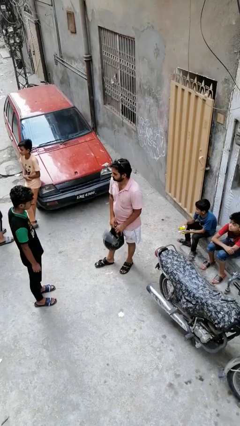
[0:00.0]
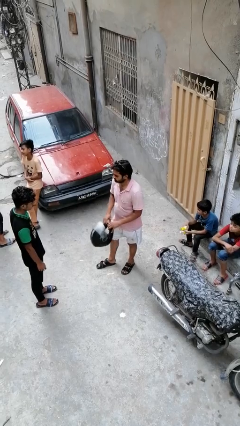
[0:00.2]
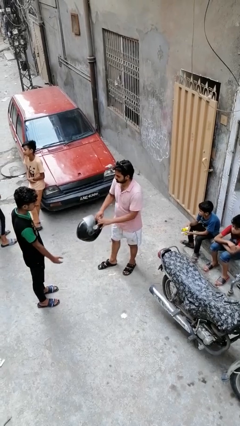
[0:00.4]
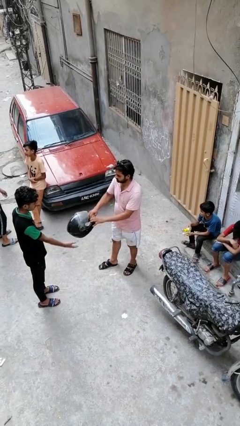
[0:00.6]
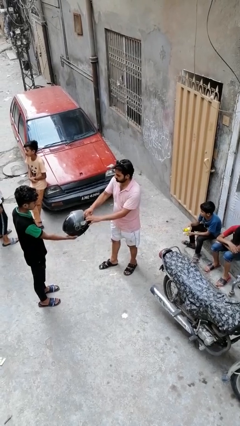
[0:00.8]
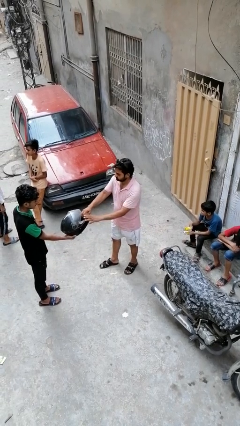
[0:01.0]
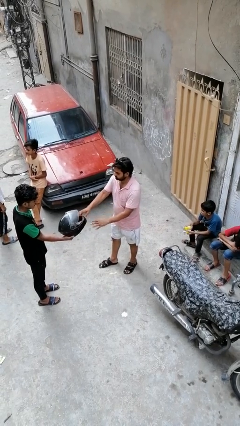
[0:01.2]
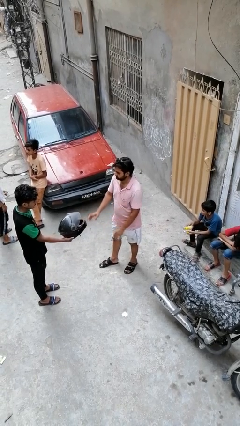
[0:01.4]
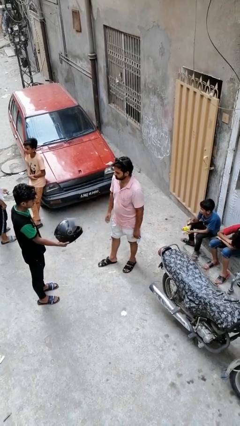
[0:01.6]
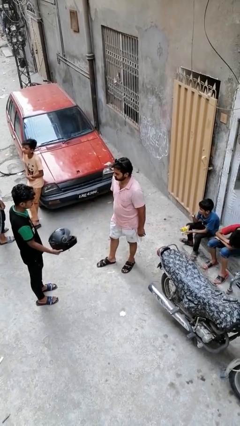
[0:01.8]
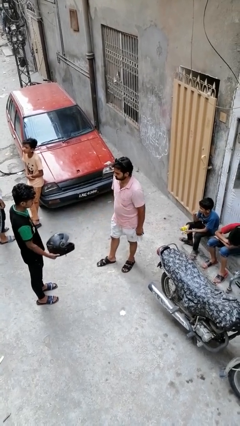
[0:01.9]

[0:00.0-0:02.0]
person transfers object to person

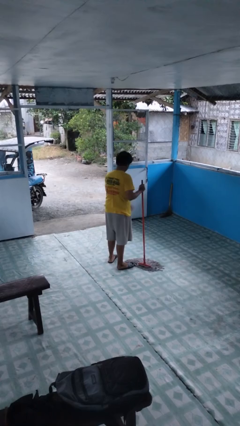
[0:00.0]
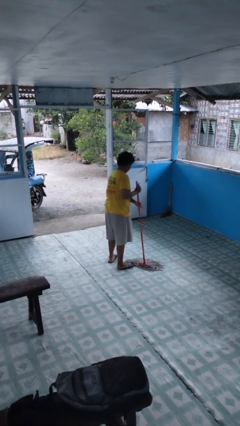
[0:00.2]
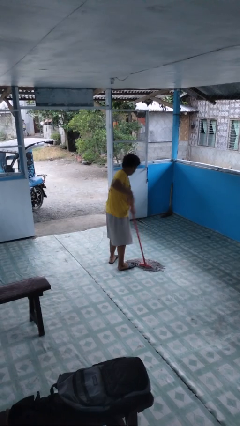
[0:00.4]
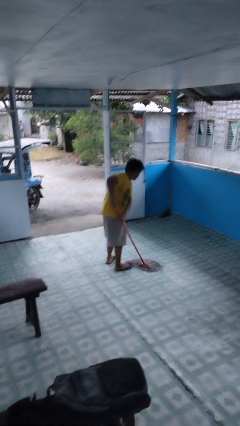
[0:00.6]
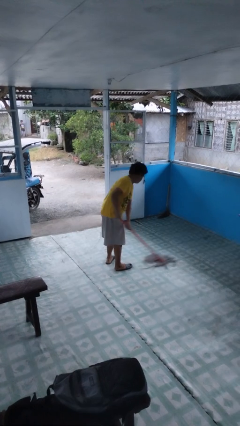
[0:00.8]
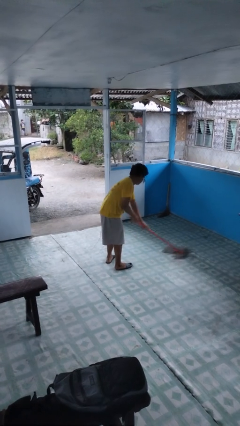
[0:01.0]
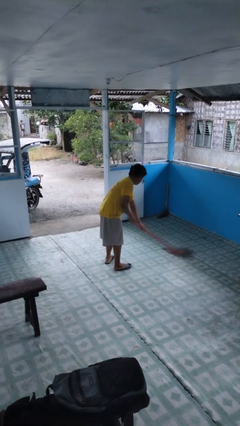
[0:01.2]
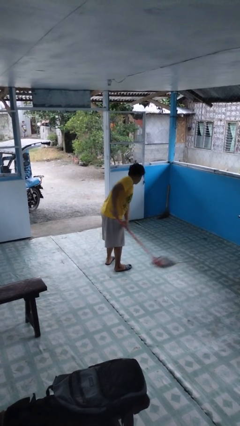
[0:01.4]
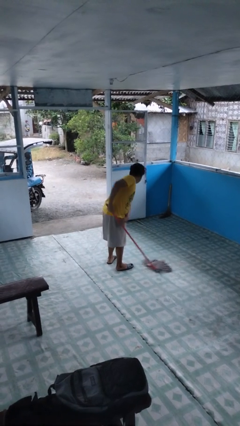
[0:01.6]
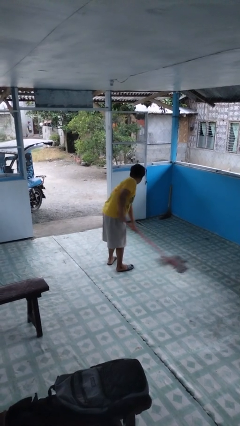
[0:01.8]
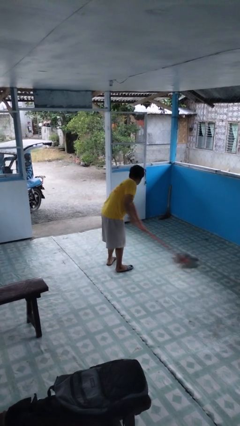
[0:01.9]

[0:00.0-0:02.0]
person mops

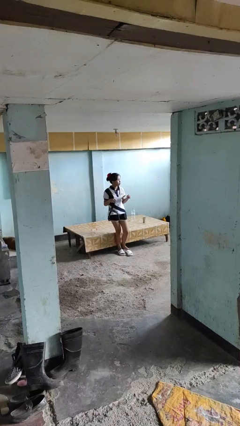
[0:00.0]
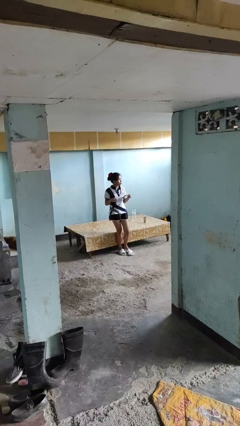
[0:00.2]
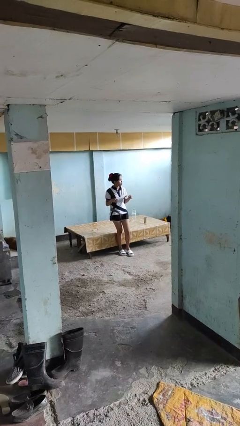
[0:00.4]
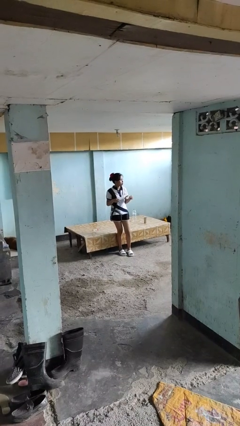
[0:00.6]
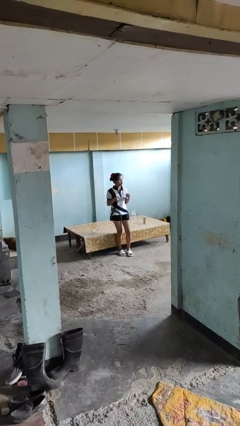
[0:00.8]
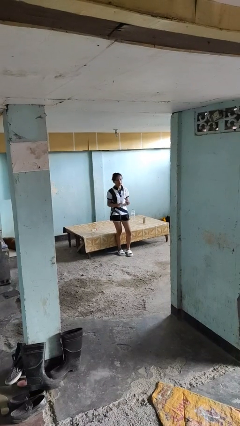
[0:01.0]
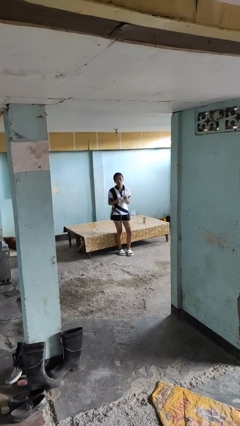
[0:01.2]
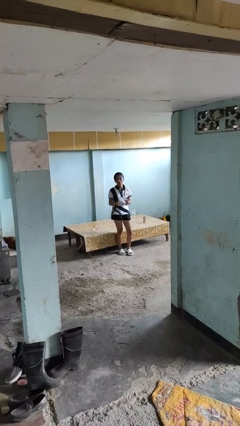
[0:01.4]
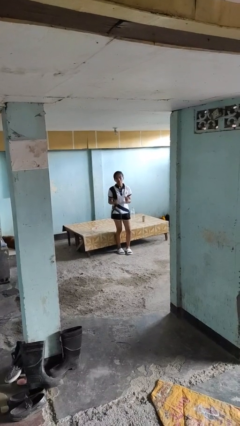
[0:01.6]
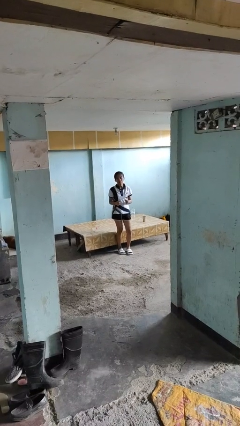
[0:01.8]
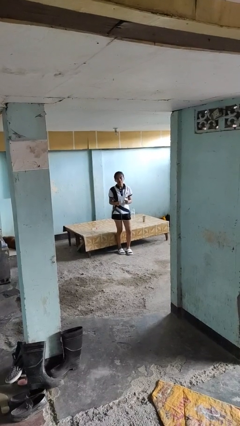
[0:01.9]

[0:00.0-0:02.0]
person snaps fingers

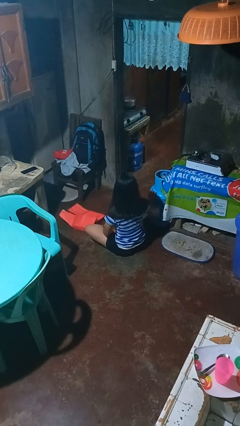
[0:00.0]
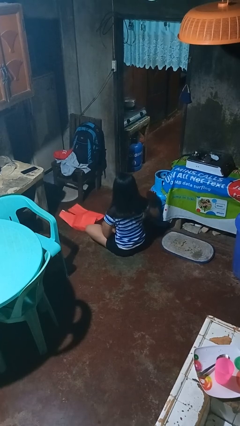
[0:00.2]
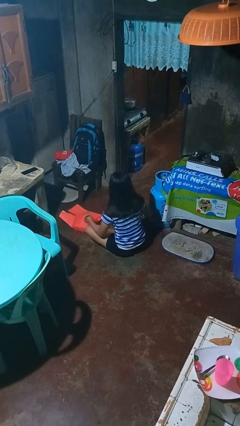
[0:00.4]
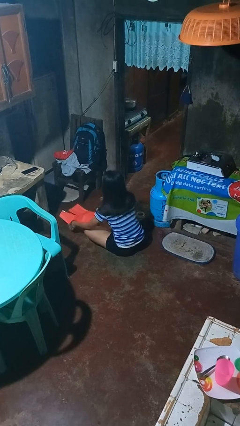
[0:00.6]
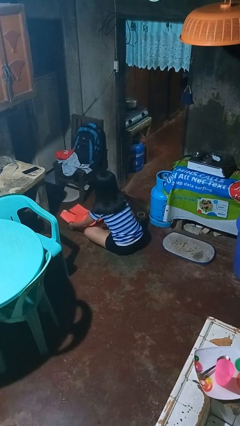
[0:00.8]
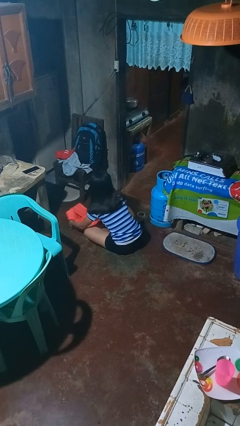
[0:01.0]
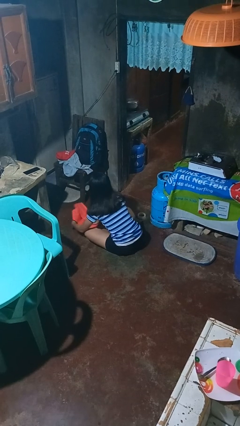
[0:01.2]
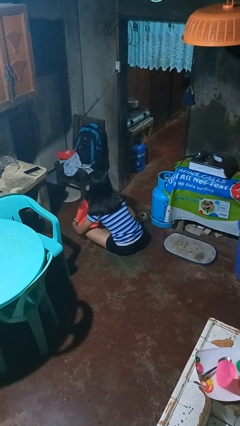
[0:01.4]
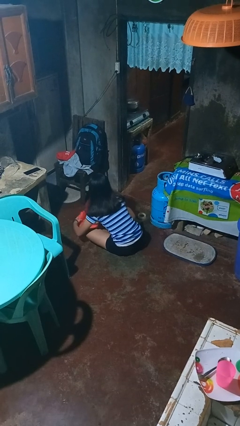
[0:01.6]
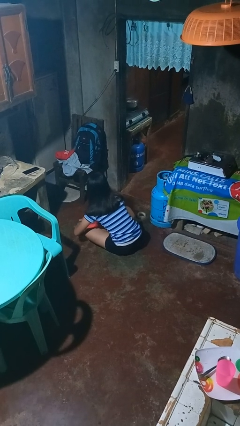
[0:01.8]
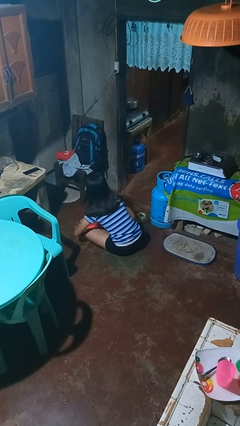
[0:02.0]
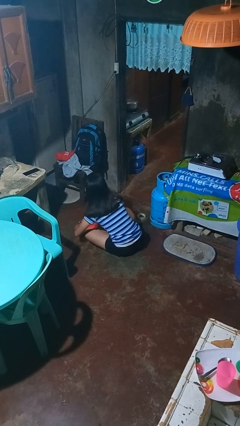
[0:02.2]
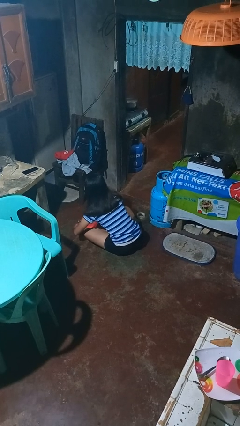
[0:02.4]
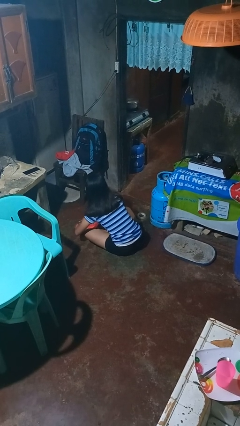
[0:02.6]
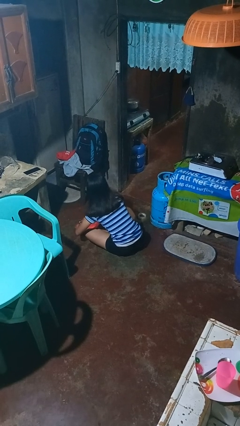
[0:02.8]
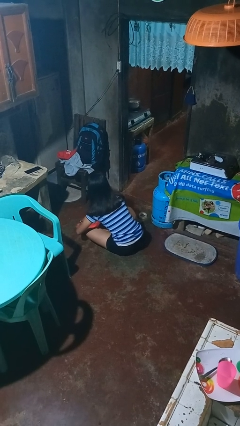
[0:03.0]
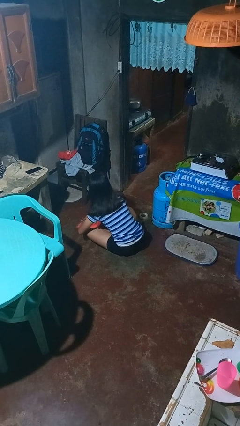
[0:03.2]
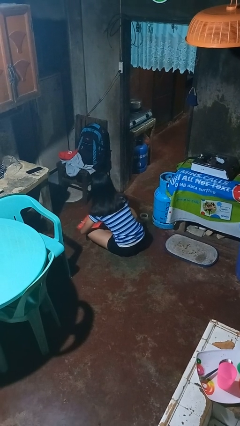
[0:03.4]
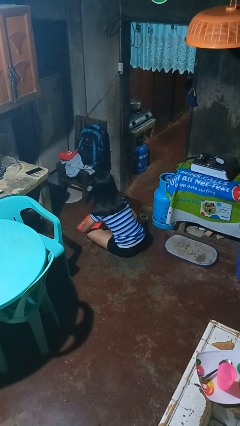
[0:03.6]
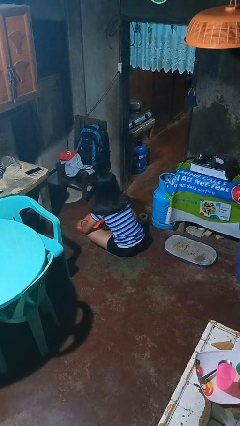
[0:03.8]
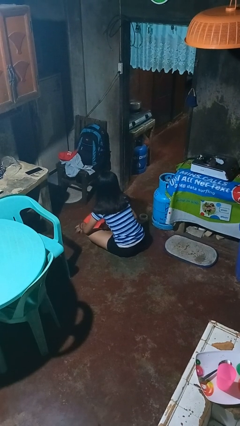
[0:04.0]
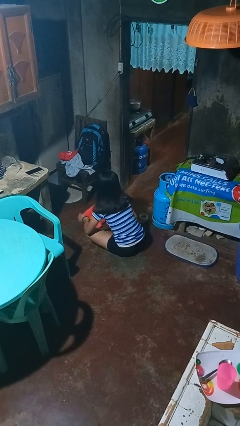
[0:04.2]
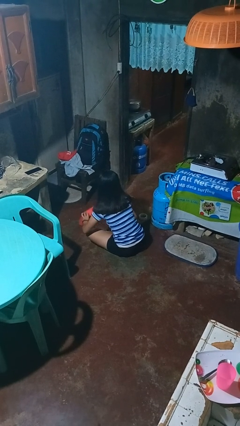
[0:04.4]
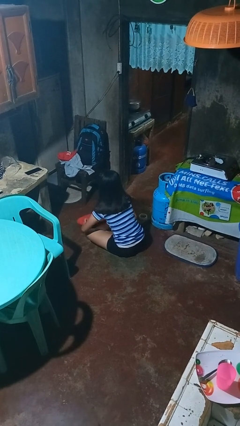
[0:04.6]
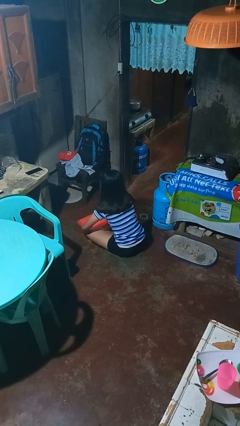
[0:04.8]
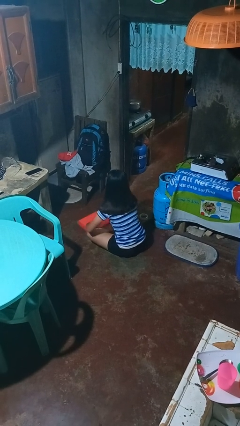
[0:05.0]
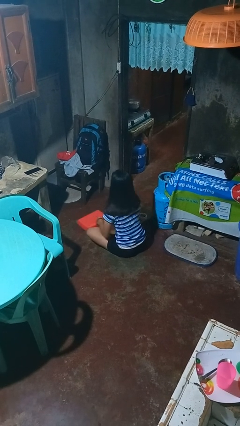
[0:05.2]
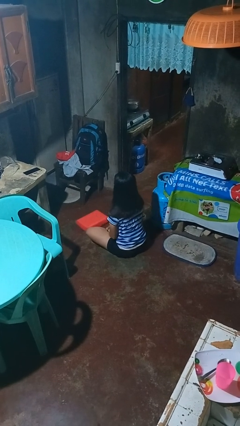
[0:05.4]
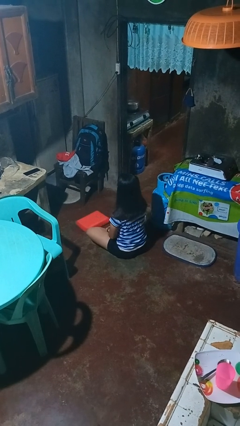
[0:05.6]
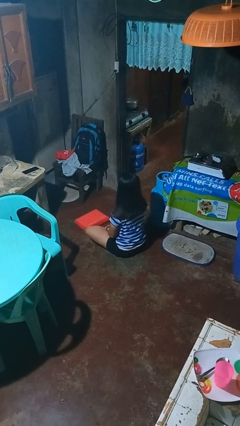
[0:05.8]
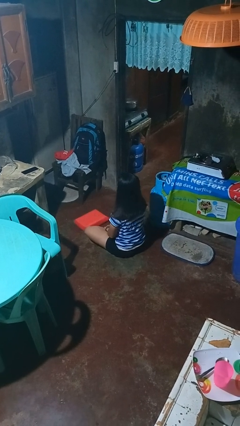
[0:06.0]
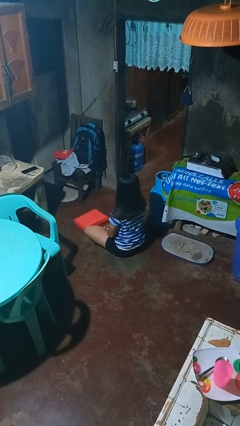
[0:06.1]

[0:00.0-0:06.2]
person wraps box

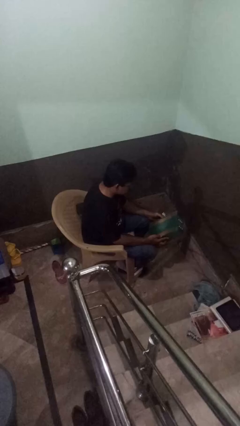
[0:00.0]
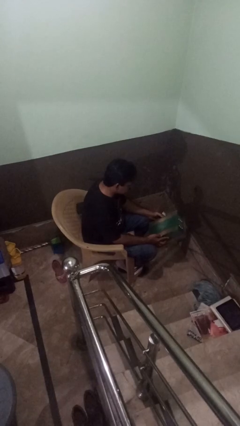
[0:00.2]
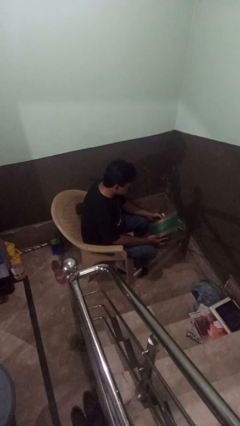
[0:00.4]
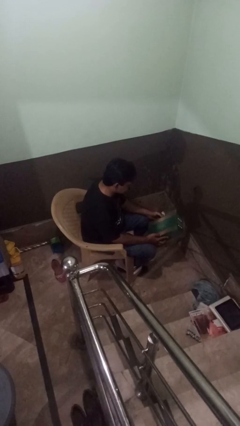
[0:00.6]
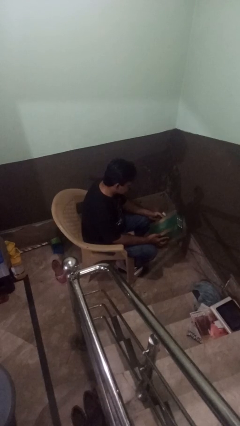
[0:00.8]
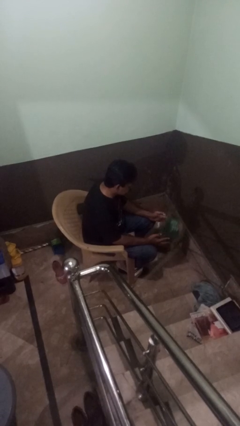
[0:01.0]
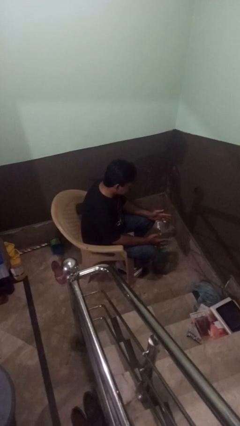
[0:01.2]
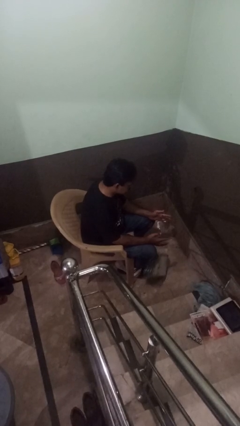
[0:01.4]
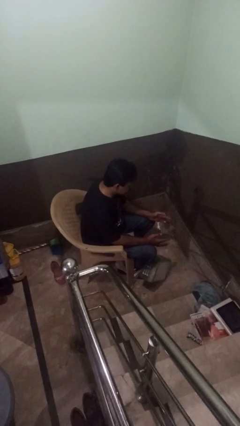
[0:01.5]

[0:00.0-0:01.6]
person drops object

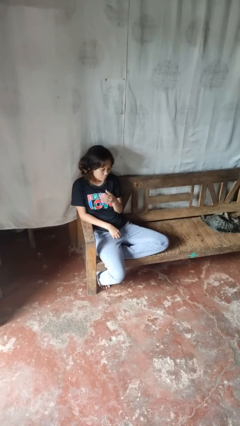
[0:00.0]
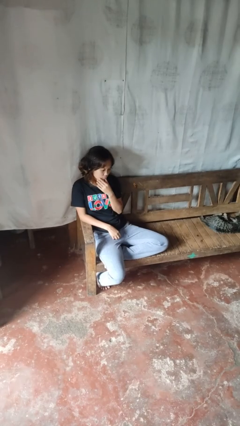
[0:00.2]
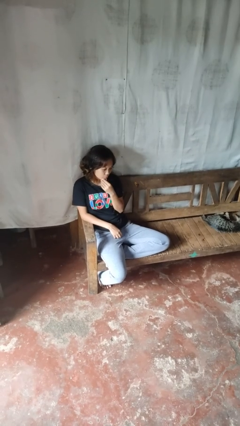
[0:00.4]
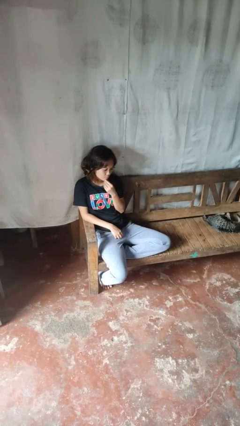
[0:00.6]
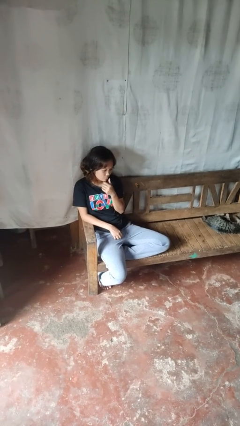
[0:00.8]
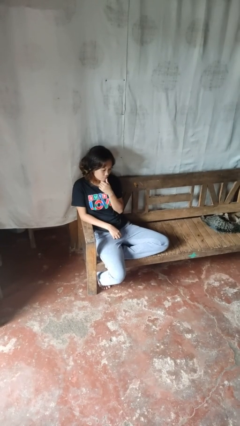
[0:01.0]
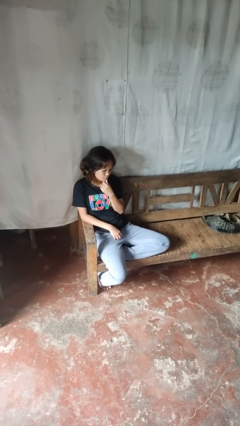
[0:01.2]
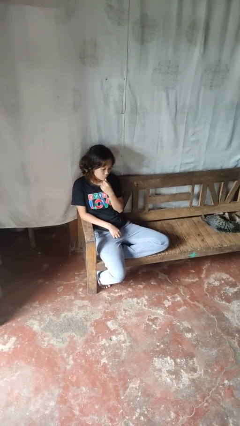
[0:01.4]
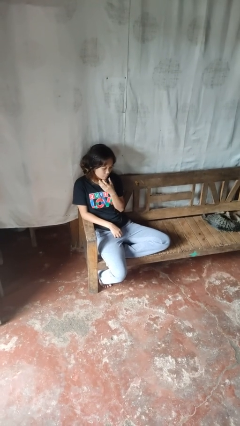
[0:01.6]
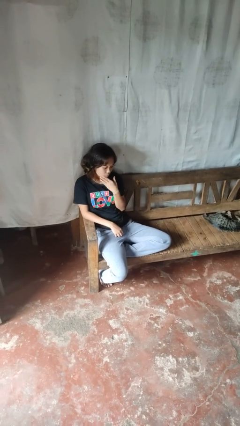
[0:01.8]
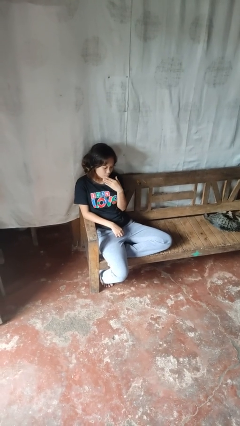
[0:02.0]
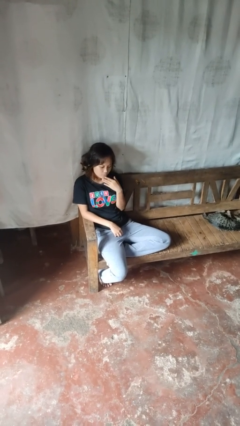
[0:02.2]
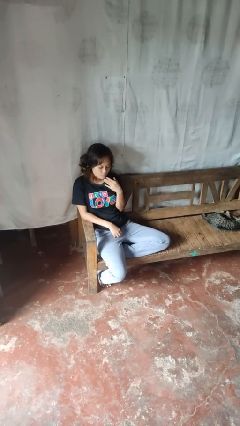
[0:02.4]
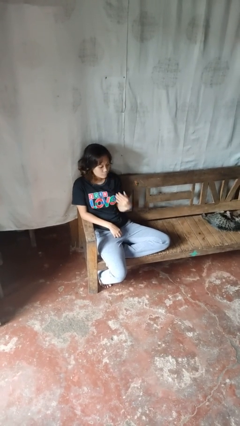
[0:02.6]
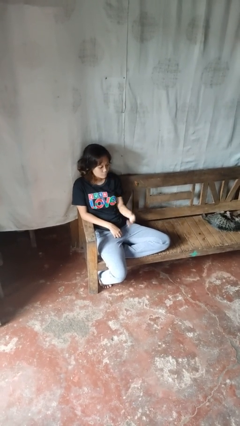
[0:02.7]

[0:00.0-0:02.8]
person strokes chin

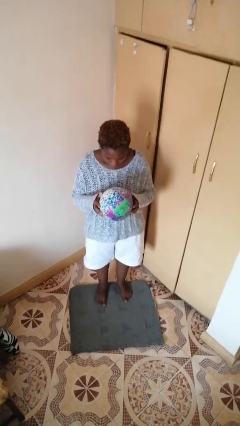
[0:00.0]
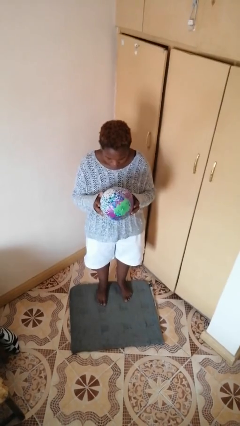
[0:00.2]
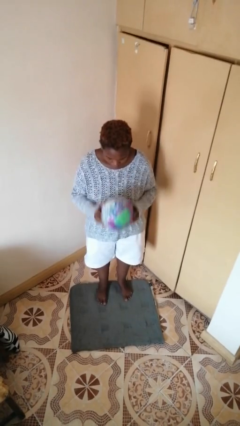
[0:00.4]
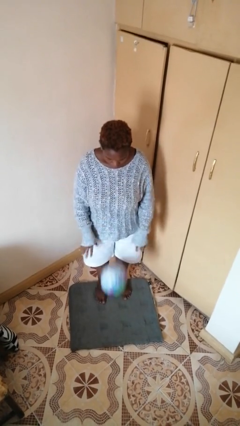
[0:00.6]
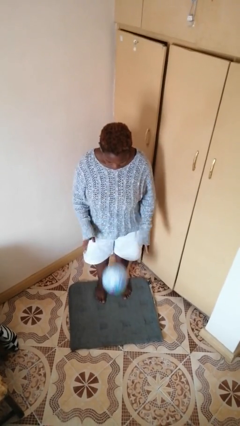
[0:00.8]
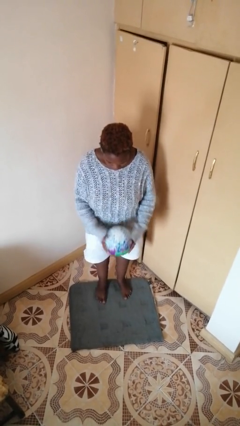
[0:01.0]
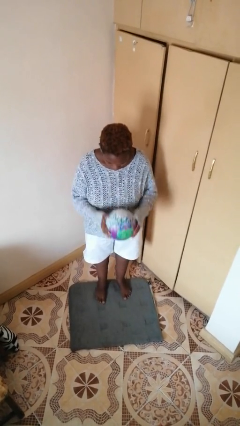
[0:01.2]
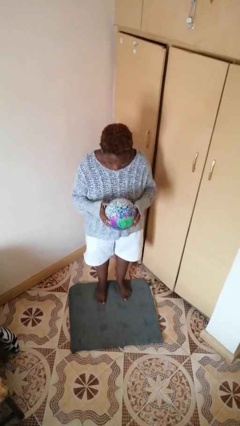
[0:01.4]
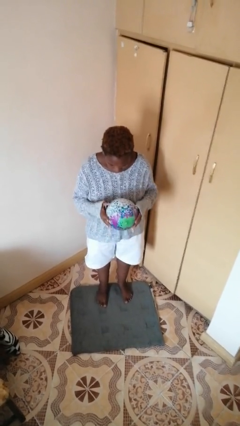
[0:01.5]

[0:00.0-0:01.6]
person bounces ball on floor
